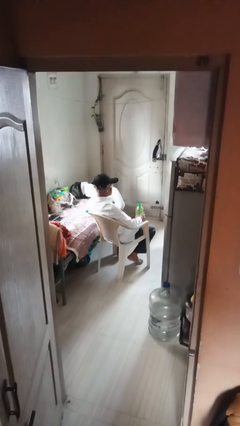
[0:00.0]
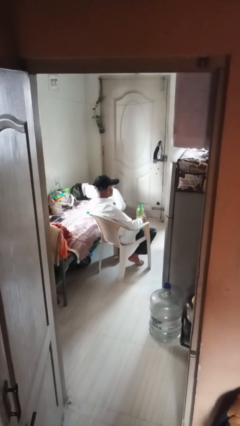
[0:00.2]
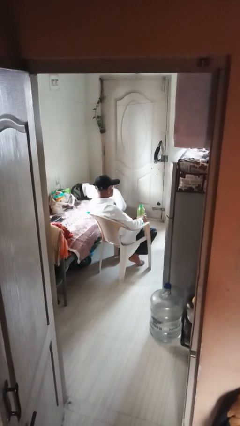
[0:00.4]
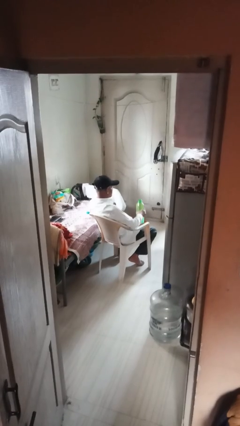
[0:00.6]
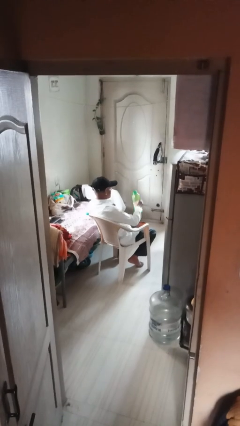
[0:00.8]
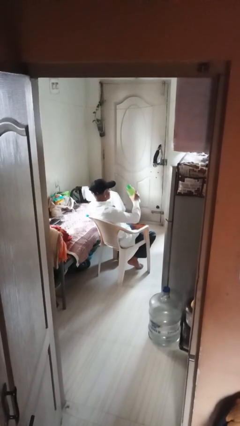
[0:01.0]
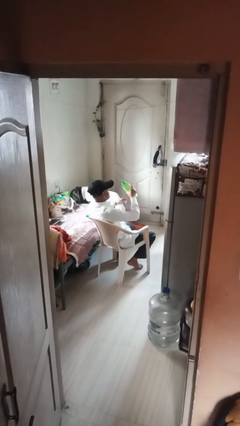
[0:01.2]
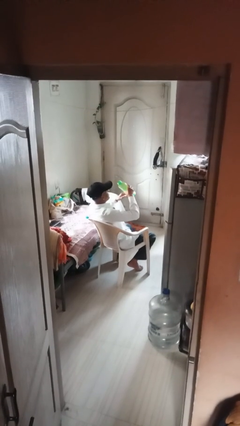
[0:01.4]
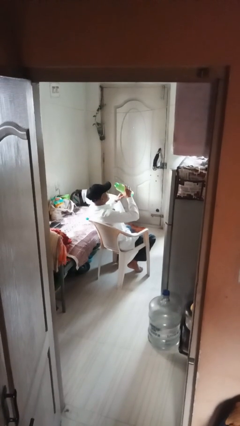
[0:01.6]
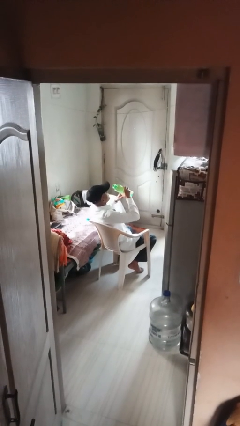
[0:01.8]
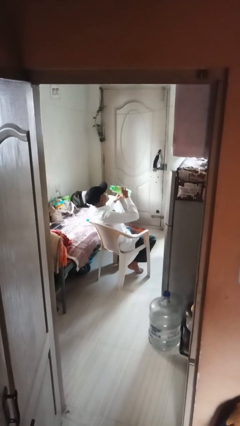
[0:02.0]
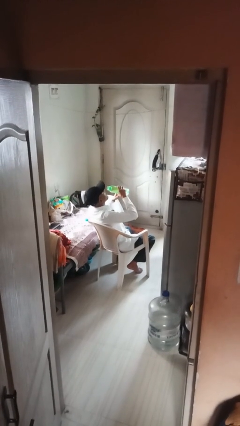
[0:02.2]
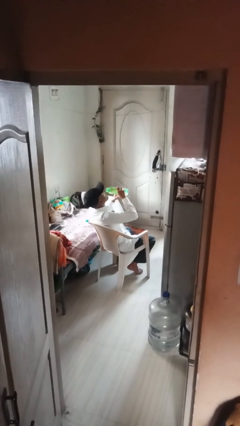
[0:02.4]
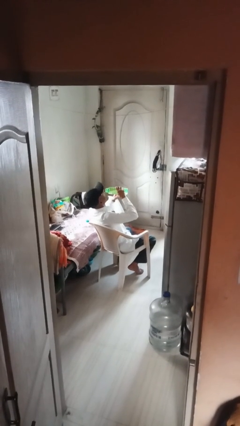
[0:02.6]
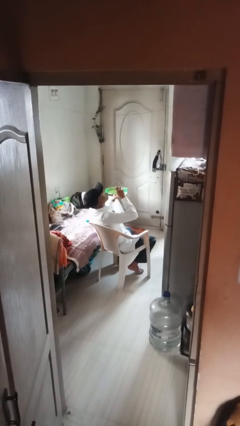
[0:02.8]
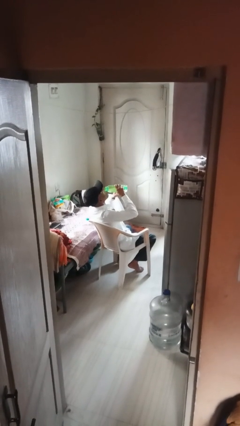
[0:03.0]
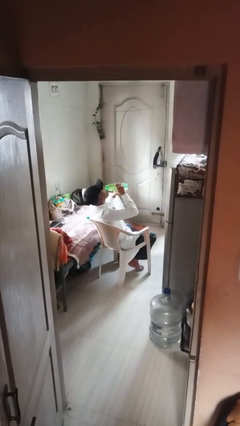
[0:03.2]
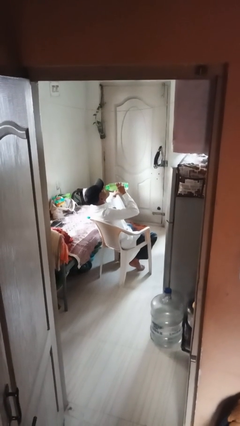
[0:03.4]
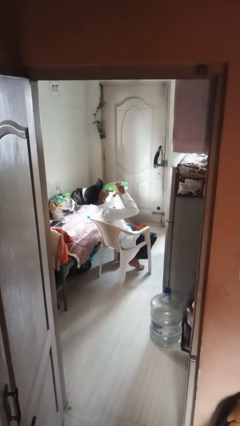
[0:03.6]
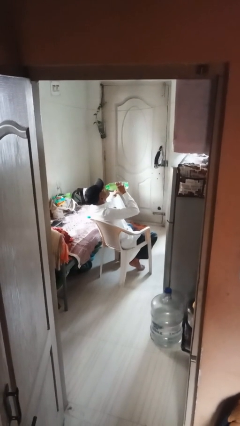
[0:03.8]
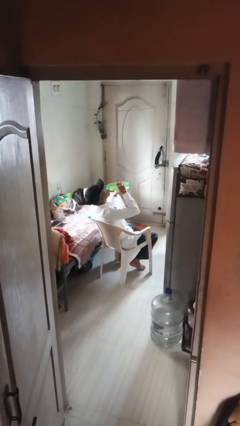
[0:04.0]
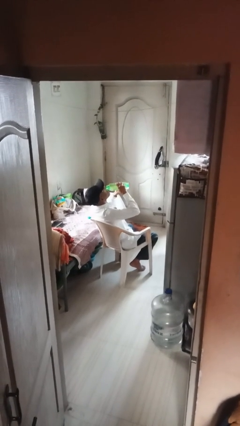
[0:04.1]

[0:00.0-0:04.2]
person drinks from bottle

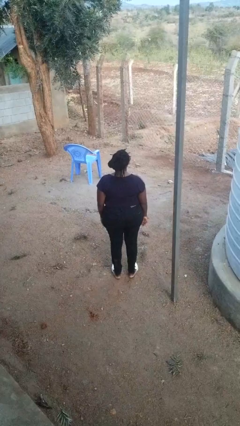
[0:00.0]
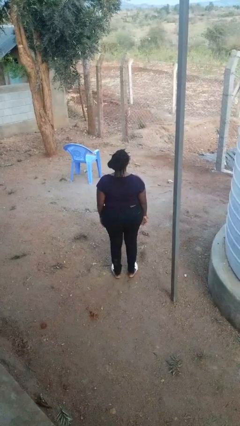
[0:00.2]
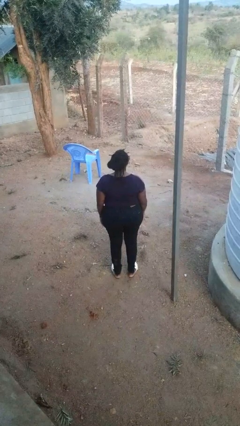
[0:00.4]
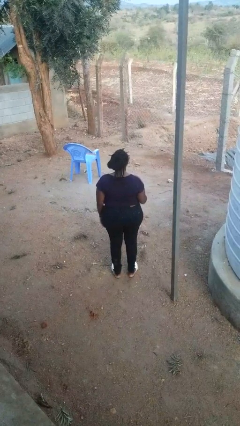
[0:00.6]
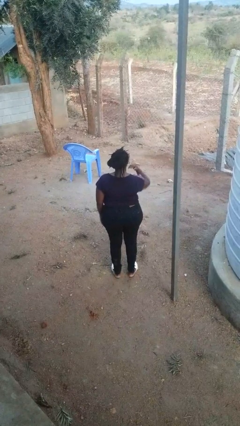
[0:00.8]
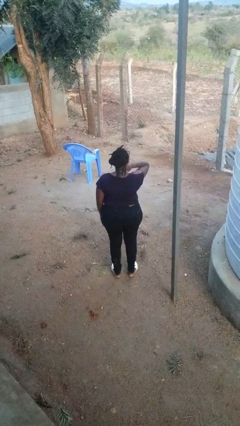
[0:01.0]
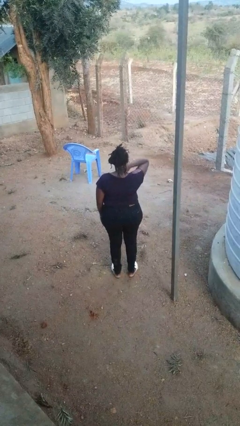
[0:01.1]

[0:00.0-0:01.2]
person rubs neck

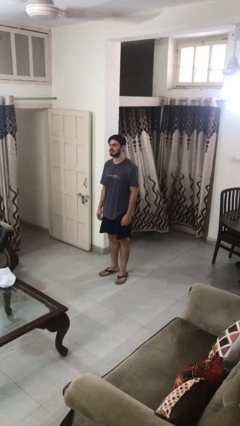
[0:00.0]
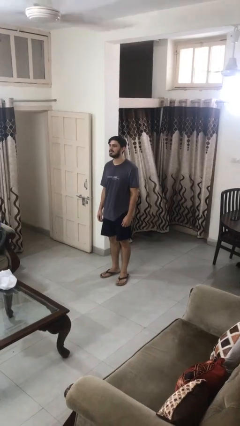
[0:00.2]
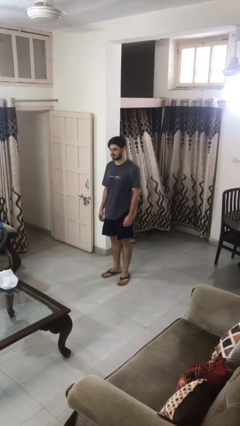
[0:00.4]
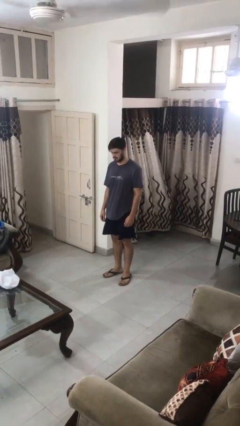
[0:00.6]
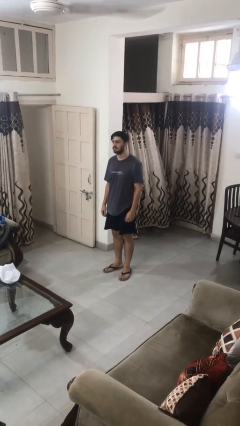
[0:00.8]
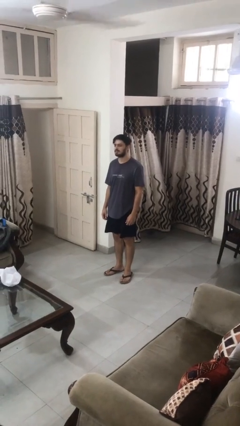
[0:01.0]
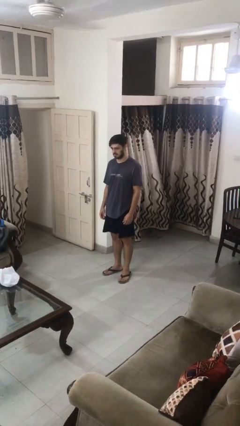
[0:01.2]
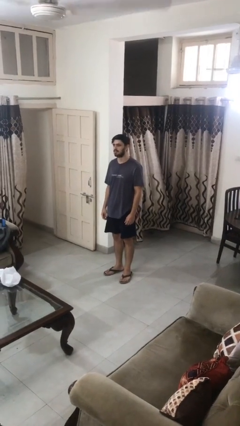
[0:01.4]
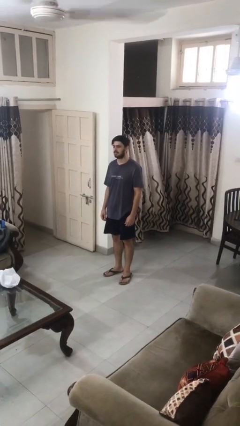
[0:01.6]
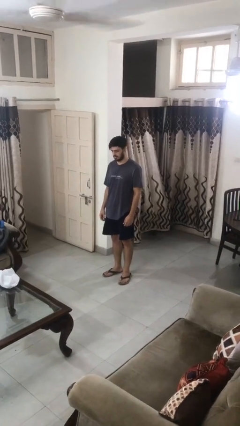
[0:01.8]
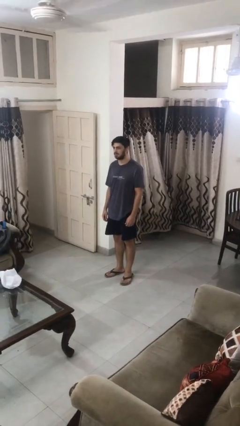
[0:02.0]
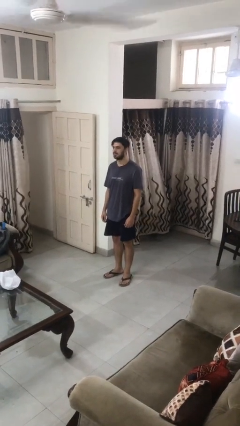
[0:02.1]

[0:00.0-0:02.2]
person nods head

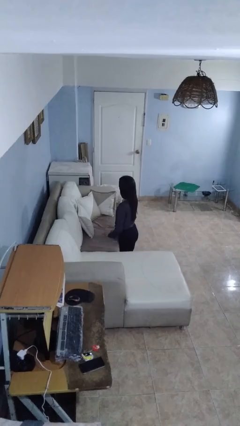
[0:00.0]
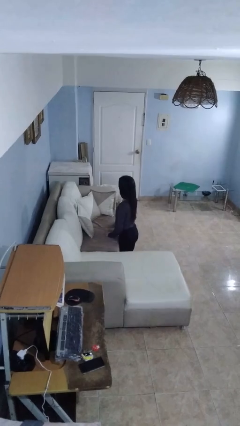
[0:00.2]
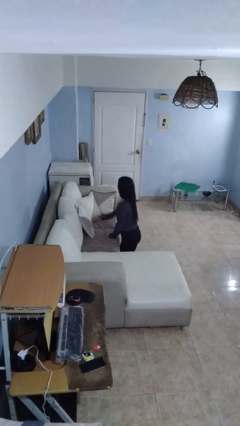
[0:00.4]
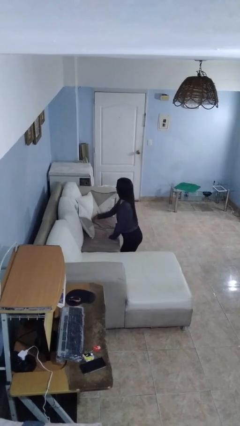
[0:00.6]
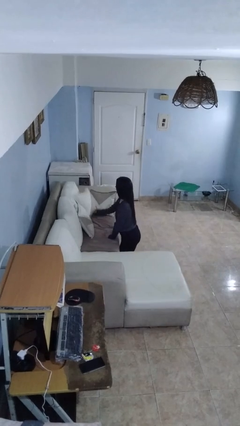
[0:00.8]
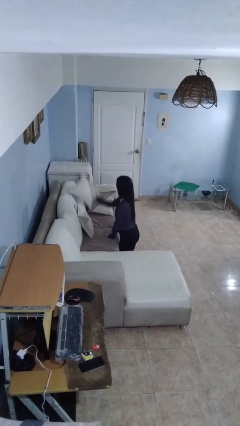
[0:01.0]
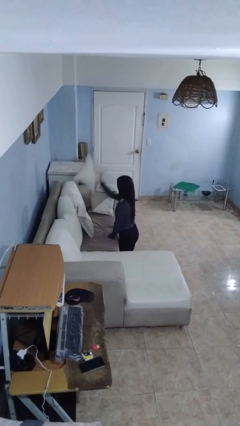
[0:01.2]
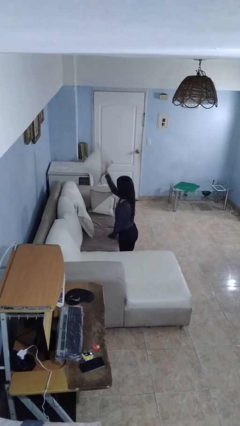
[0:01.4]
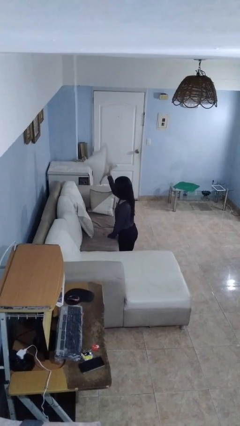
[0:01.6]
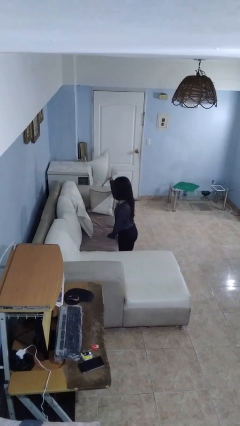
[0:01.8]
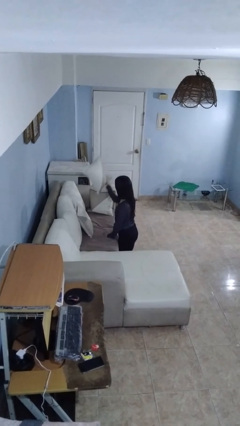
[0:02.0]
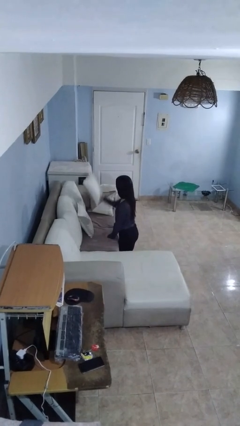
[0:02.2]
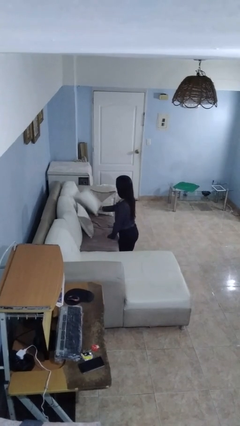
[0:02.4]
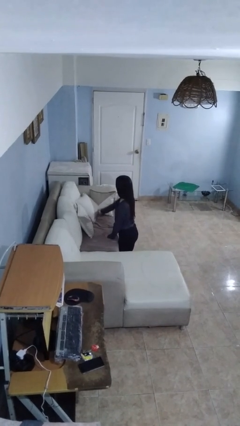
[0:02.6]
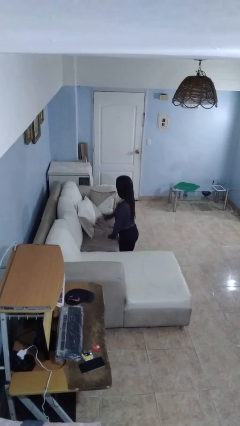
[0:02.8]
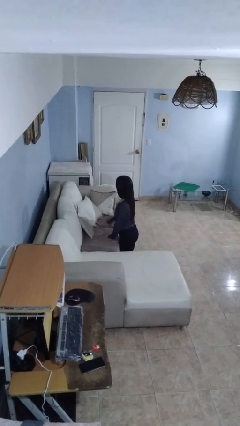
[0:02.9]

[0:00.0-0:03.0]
person searches in couch

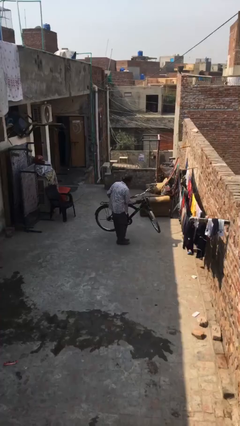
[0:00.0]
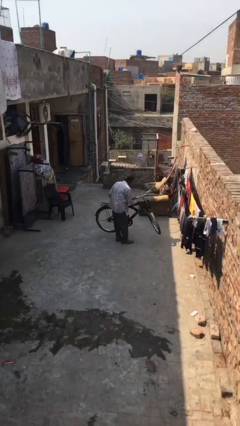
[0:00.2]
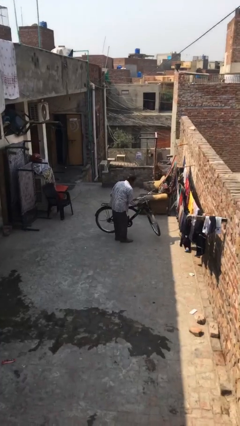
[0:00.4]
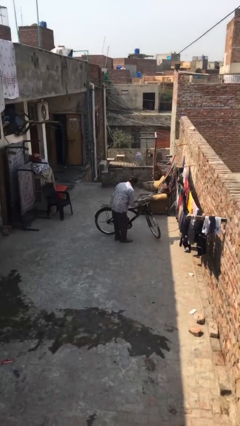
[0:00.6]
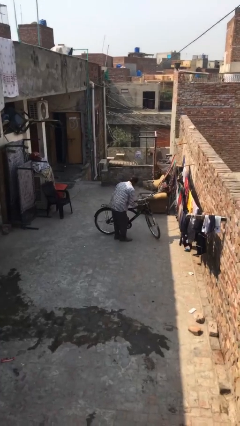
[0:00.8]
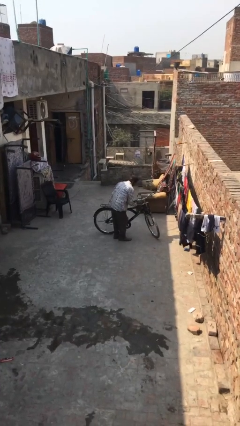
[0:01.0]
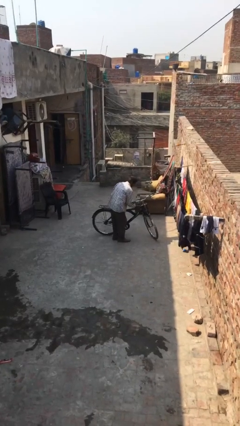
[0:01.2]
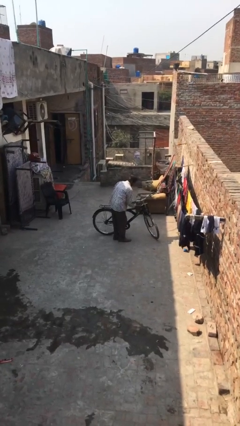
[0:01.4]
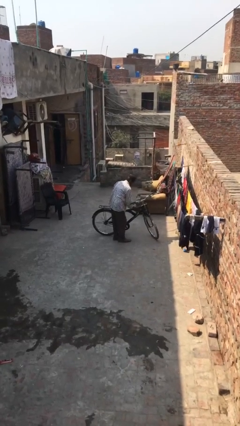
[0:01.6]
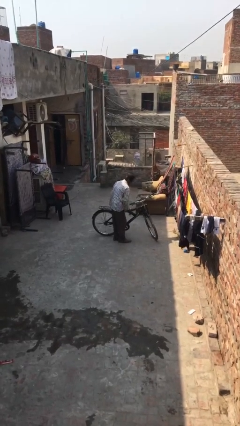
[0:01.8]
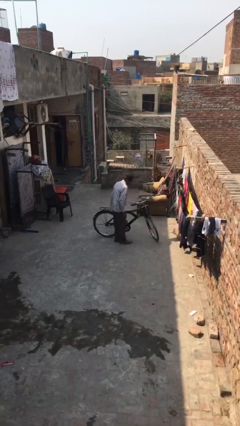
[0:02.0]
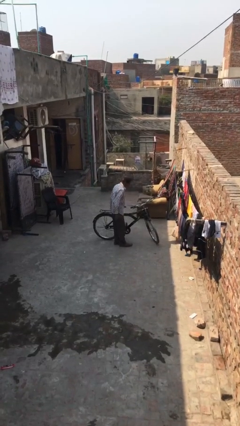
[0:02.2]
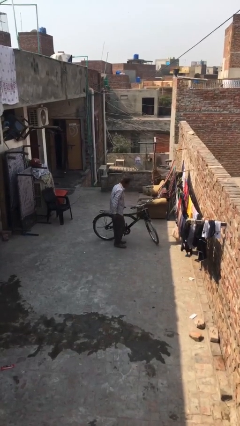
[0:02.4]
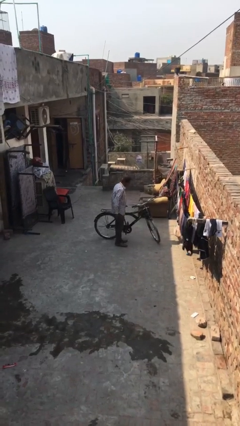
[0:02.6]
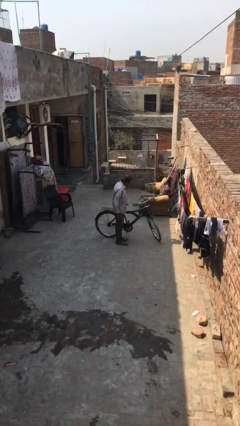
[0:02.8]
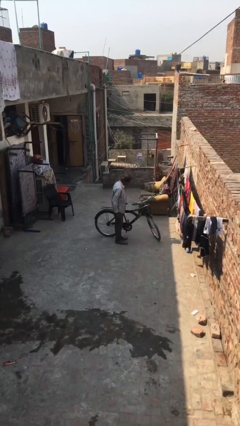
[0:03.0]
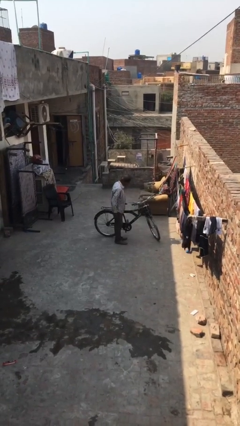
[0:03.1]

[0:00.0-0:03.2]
person puts down object on floor

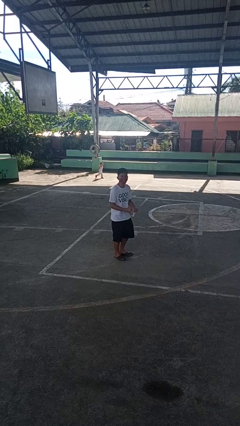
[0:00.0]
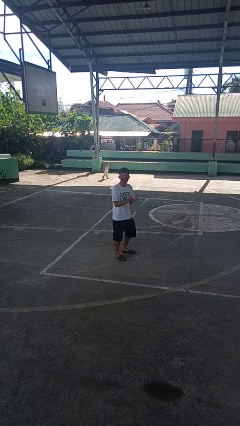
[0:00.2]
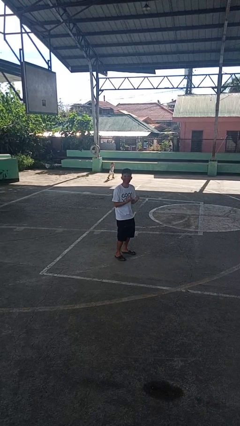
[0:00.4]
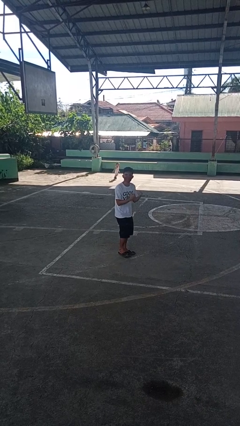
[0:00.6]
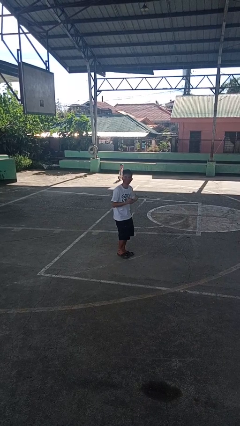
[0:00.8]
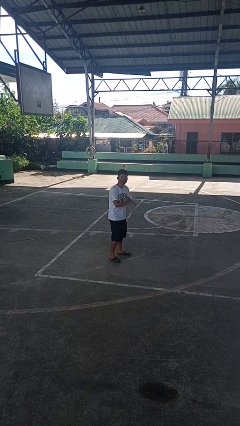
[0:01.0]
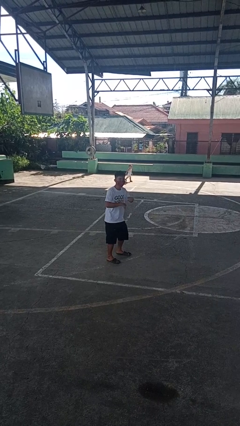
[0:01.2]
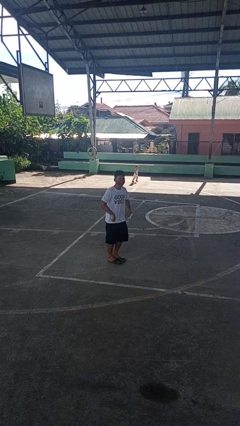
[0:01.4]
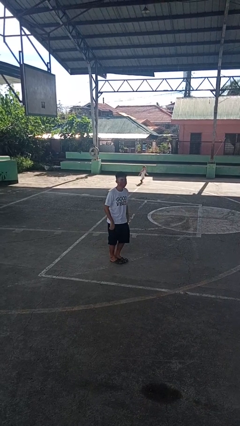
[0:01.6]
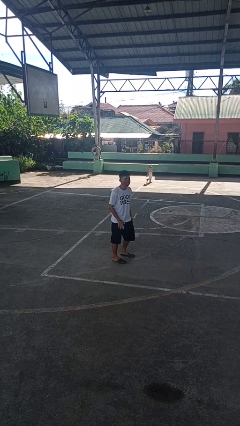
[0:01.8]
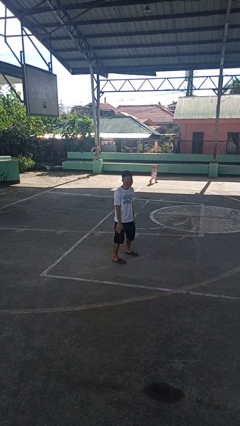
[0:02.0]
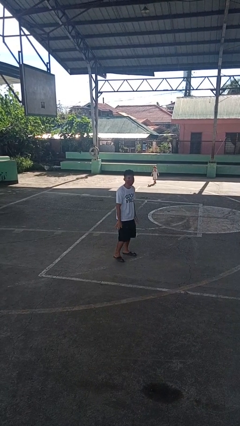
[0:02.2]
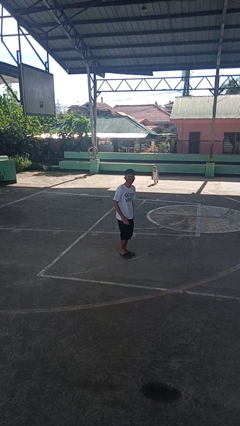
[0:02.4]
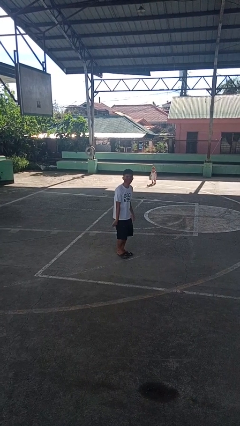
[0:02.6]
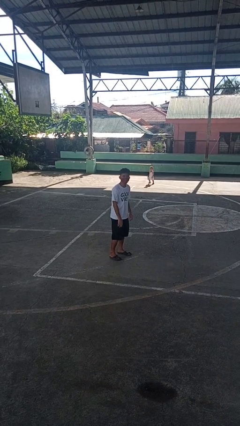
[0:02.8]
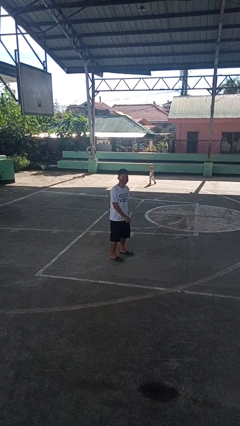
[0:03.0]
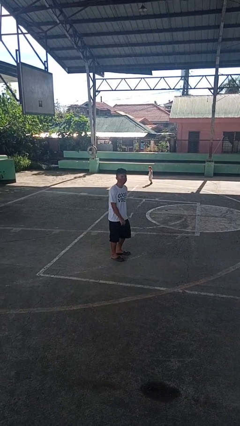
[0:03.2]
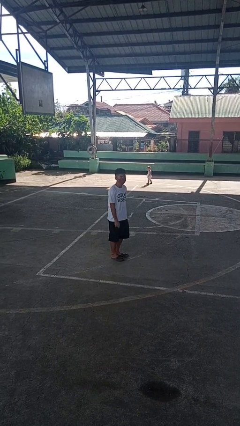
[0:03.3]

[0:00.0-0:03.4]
person dances in place

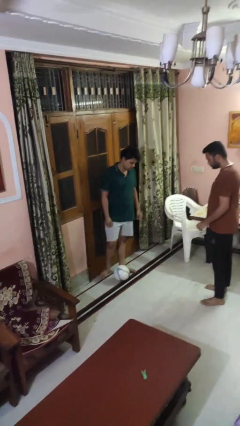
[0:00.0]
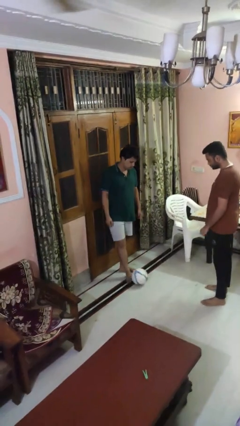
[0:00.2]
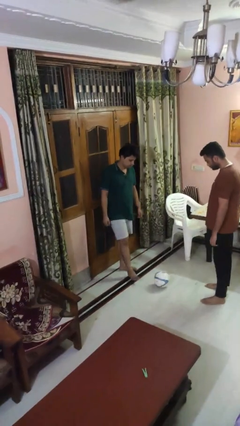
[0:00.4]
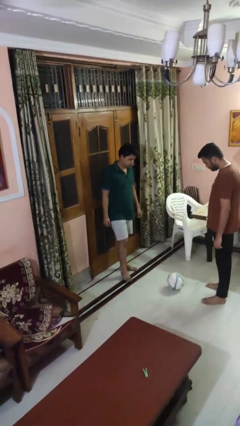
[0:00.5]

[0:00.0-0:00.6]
person kicks object to person
